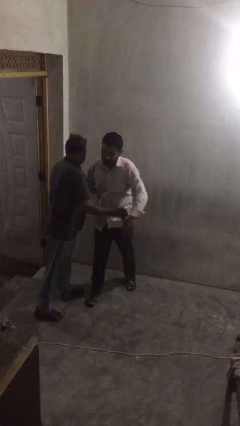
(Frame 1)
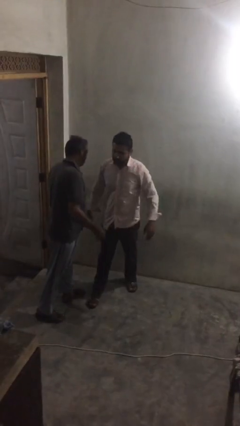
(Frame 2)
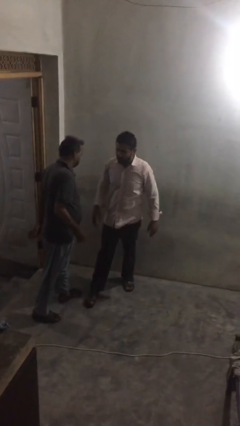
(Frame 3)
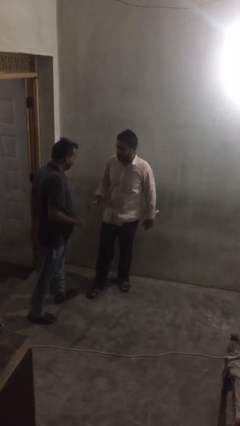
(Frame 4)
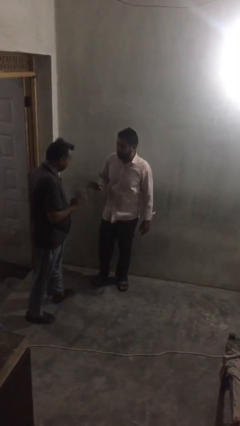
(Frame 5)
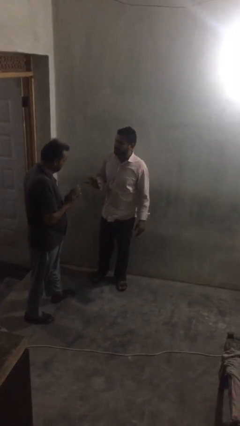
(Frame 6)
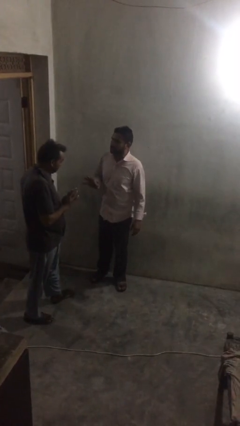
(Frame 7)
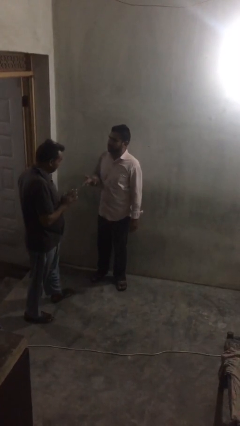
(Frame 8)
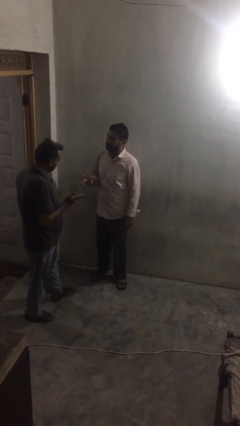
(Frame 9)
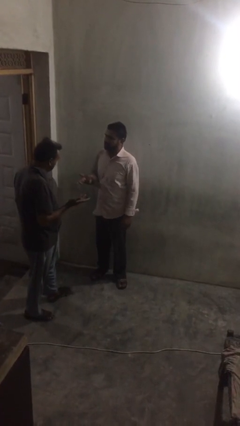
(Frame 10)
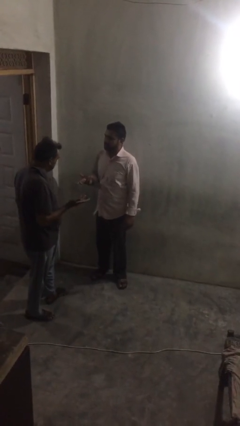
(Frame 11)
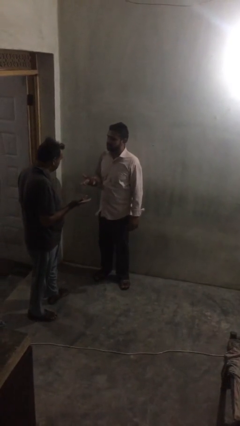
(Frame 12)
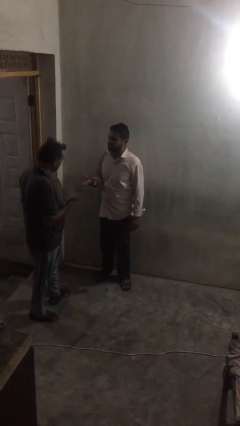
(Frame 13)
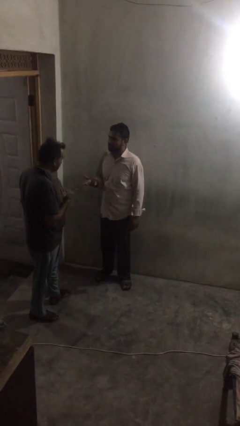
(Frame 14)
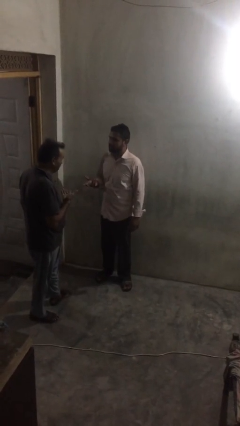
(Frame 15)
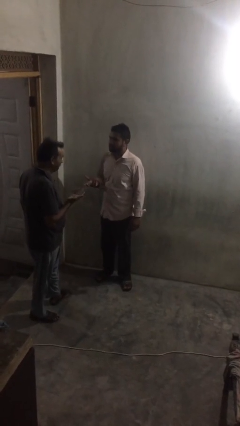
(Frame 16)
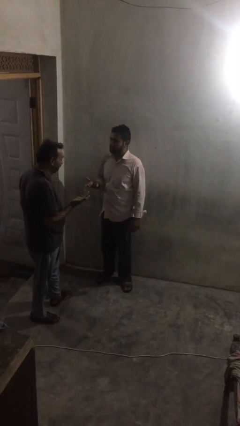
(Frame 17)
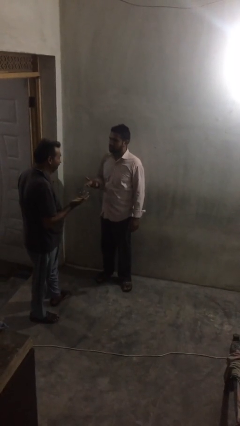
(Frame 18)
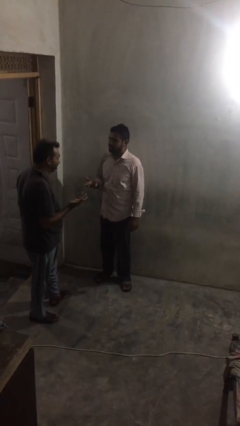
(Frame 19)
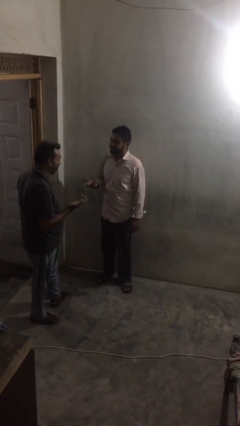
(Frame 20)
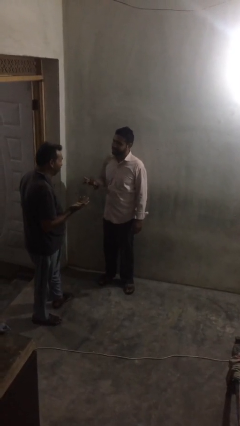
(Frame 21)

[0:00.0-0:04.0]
person talks to person

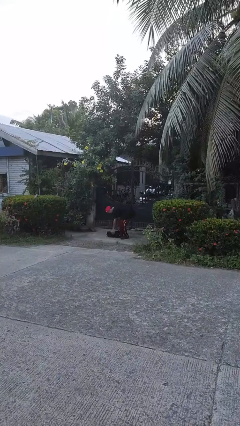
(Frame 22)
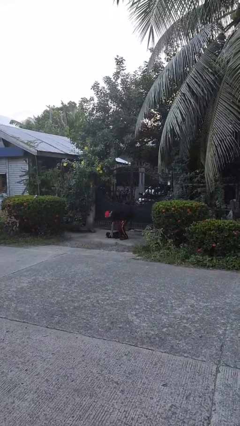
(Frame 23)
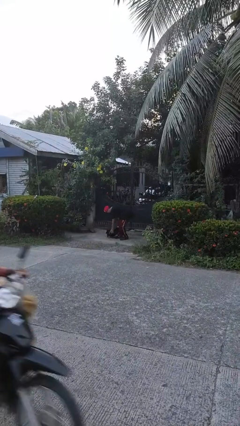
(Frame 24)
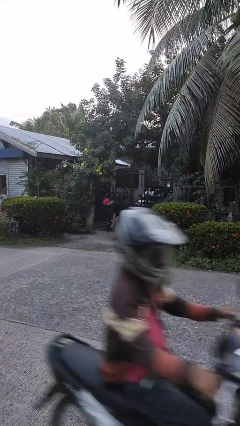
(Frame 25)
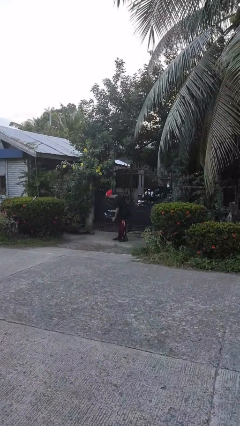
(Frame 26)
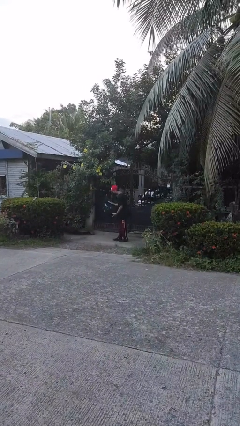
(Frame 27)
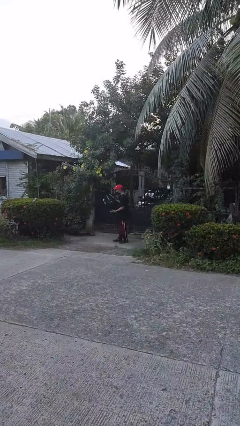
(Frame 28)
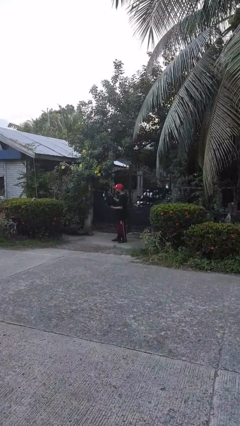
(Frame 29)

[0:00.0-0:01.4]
person picks up object from floor

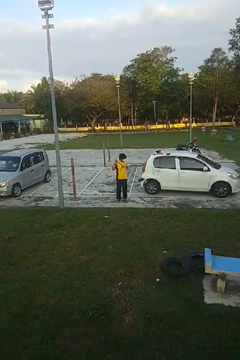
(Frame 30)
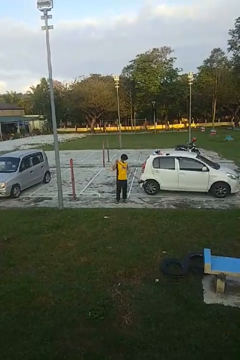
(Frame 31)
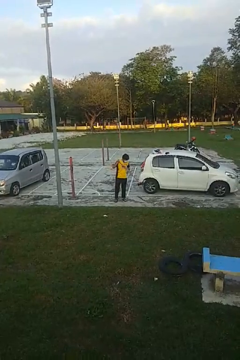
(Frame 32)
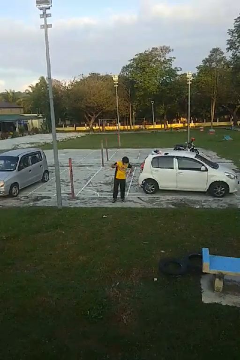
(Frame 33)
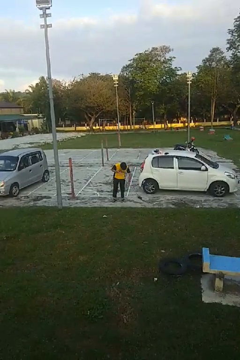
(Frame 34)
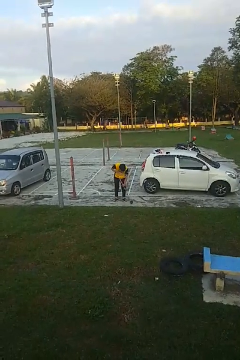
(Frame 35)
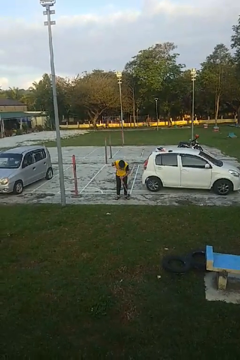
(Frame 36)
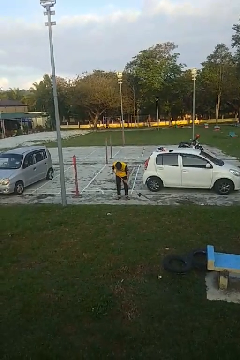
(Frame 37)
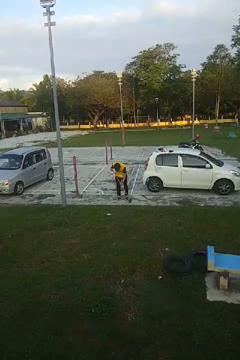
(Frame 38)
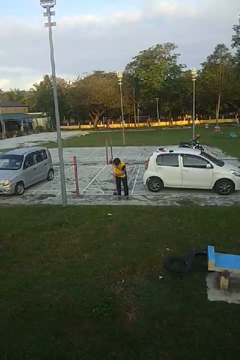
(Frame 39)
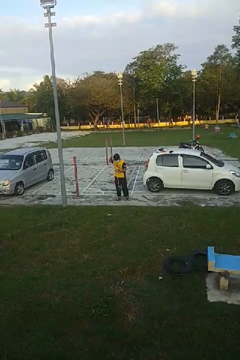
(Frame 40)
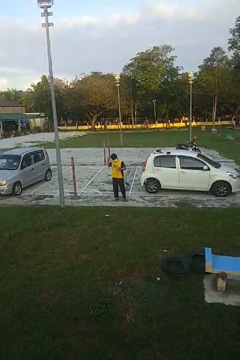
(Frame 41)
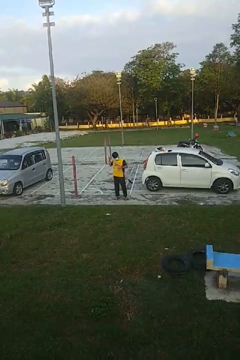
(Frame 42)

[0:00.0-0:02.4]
person sweeps floor

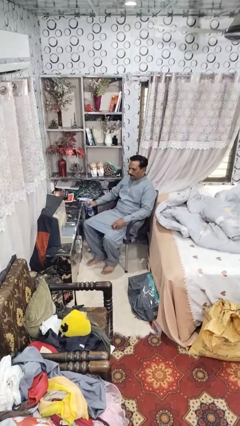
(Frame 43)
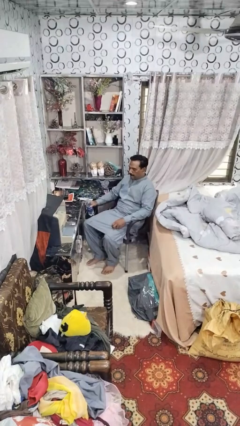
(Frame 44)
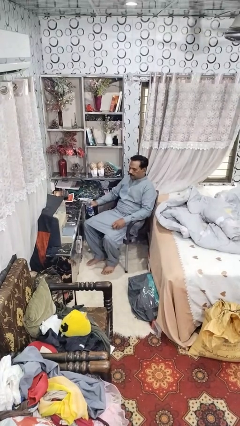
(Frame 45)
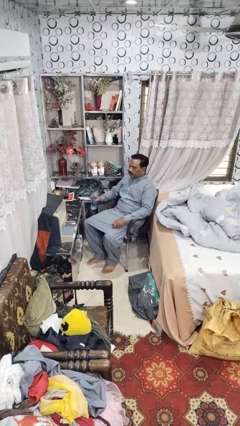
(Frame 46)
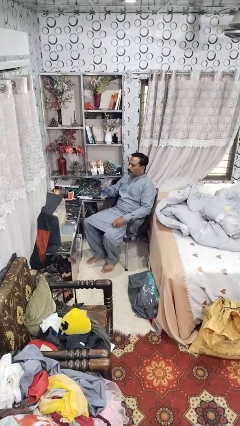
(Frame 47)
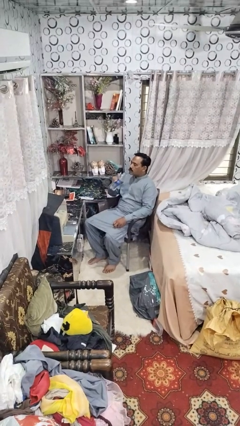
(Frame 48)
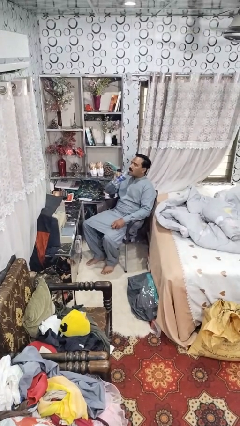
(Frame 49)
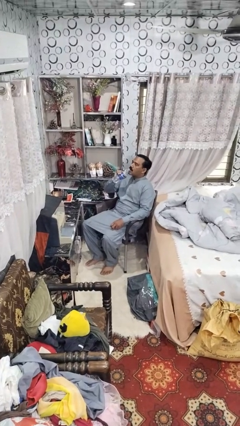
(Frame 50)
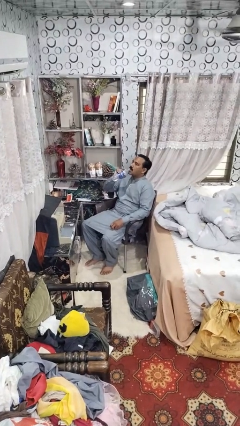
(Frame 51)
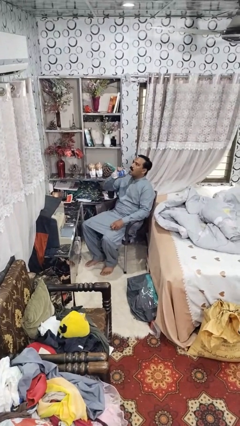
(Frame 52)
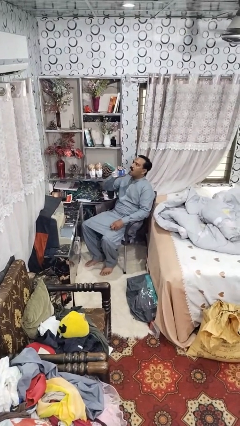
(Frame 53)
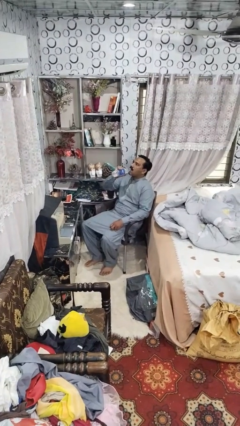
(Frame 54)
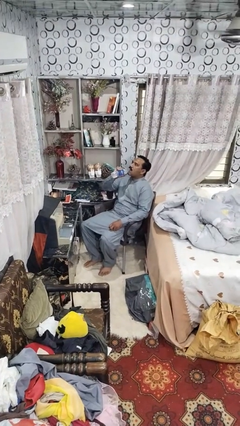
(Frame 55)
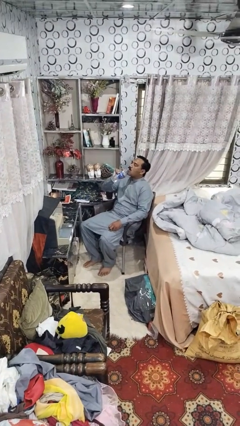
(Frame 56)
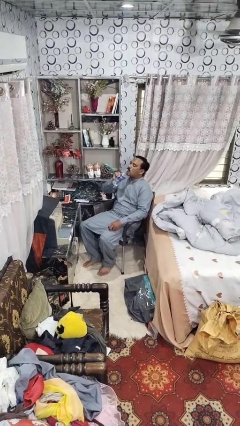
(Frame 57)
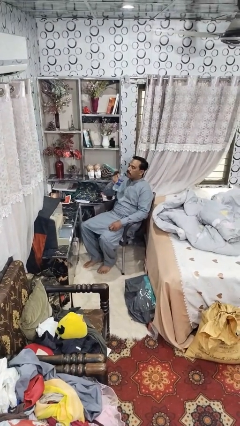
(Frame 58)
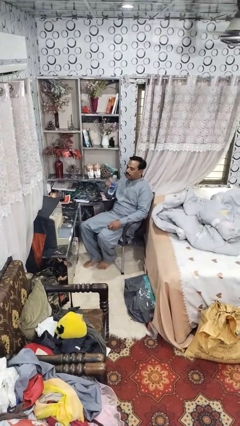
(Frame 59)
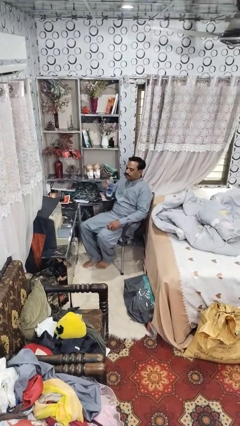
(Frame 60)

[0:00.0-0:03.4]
person drinks from bottle

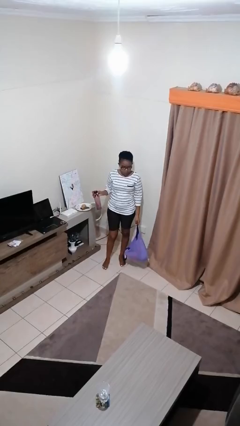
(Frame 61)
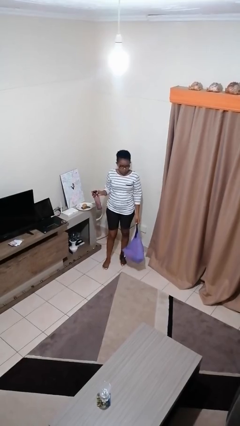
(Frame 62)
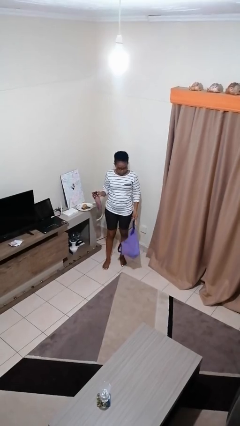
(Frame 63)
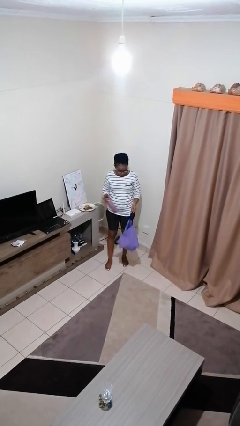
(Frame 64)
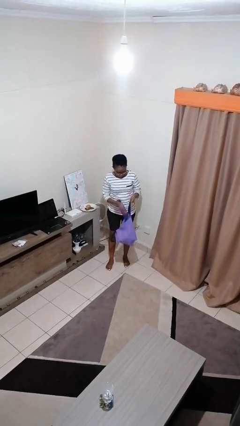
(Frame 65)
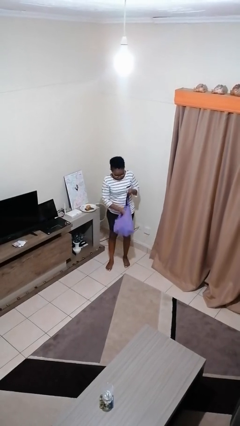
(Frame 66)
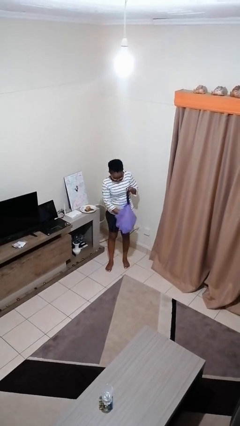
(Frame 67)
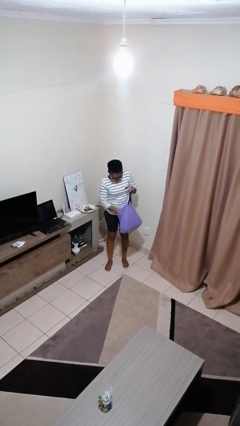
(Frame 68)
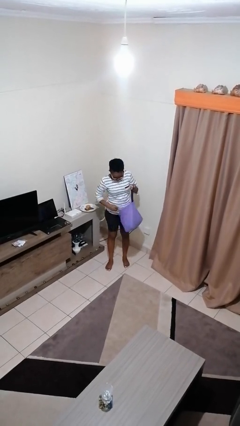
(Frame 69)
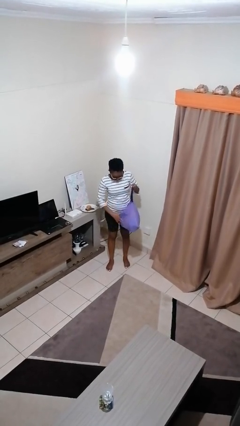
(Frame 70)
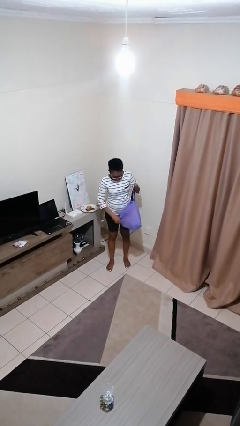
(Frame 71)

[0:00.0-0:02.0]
person puts object into bag

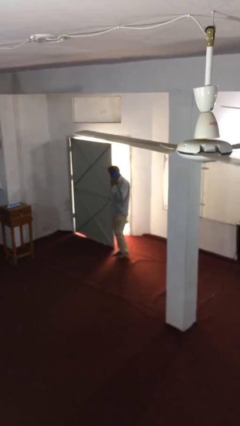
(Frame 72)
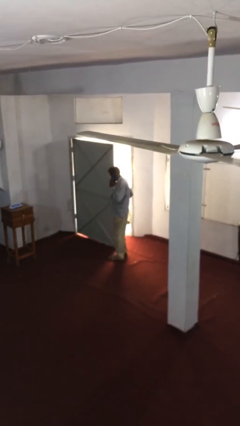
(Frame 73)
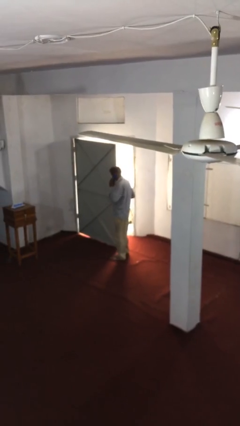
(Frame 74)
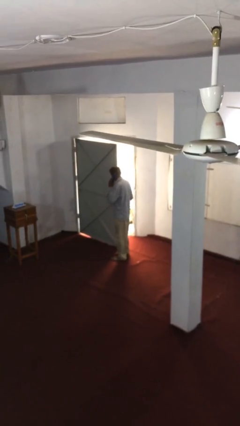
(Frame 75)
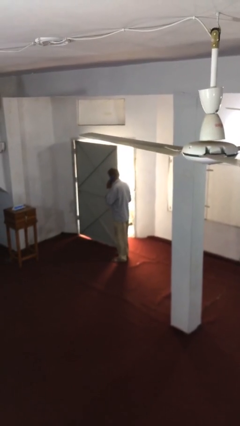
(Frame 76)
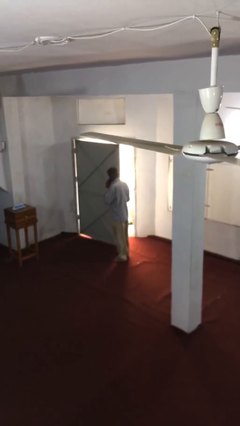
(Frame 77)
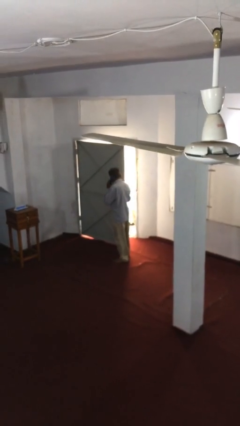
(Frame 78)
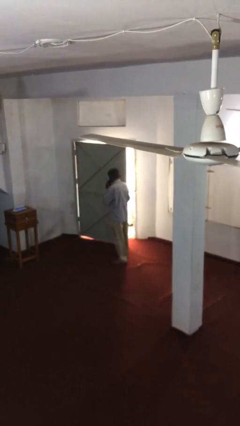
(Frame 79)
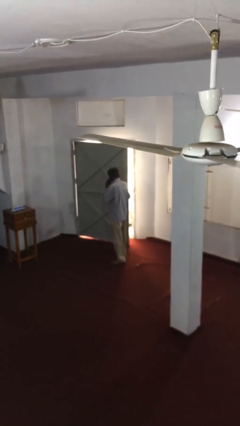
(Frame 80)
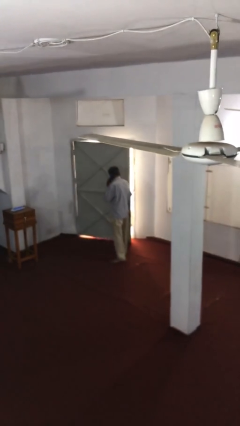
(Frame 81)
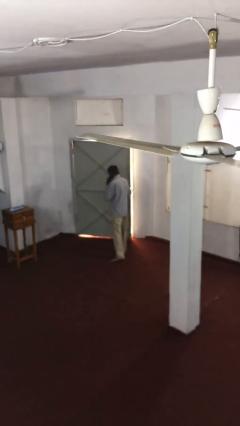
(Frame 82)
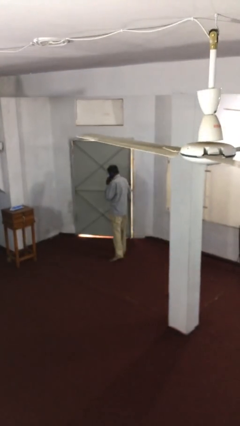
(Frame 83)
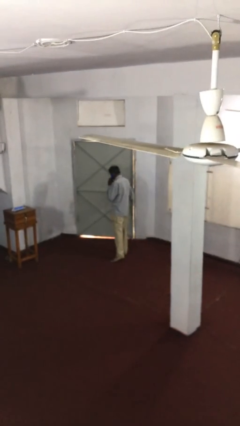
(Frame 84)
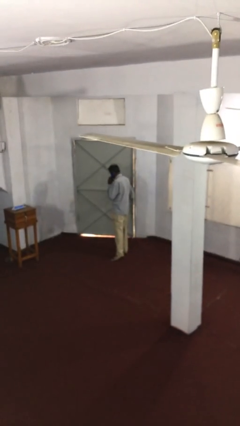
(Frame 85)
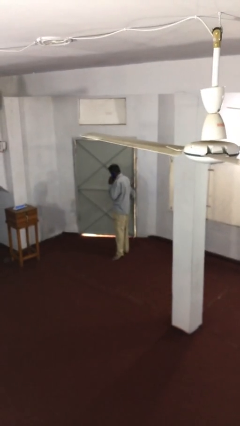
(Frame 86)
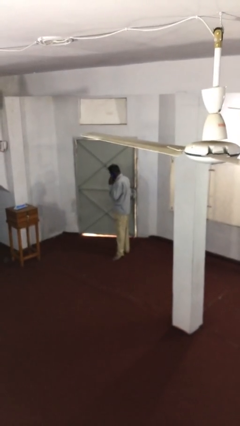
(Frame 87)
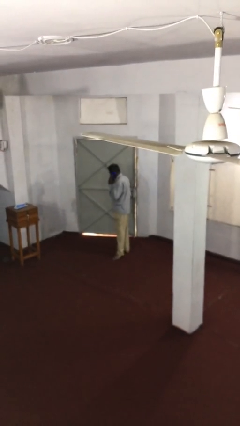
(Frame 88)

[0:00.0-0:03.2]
person closes facility door

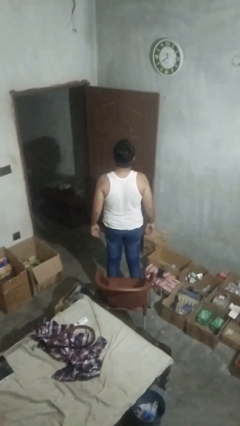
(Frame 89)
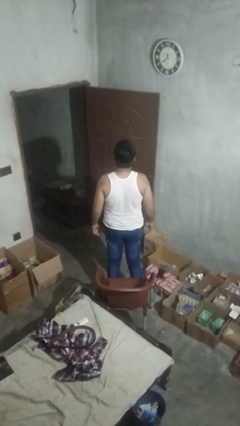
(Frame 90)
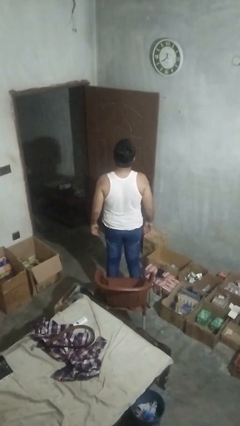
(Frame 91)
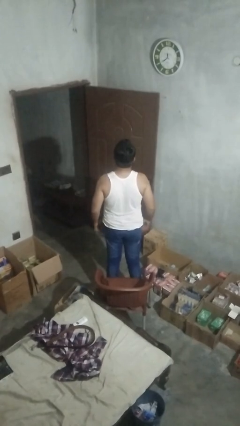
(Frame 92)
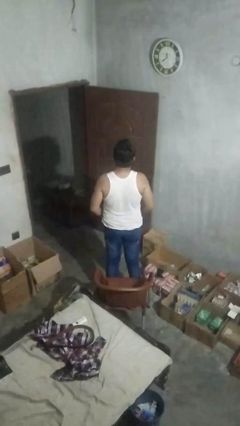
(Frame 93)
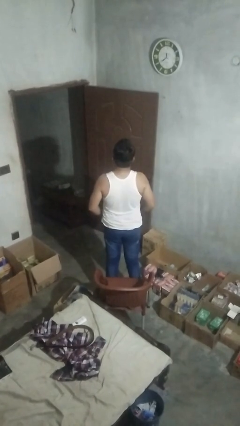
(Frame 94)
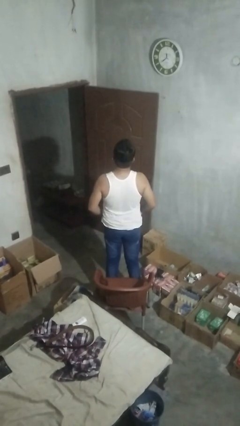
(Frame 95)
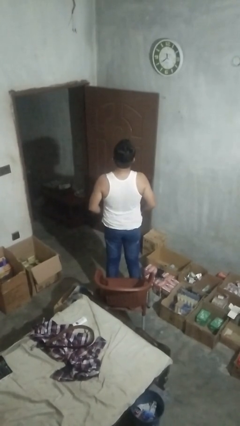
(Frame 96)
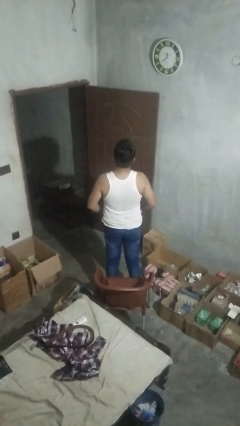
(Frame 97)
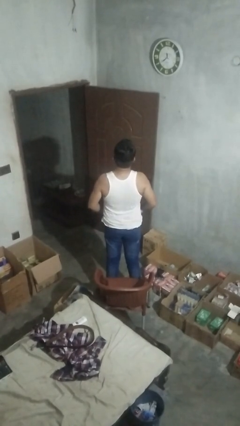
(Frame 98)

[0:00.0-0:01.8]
person hikes up pants
